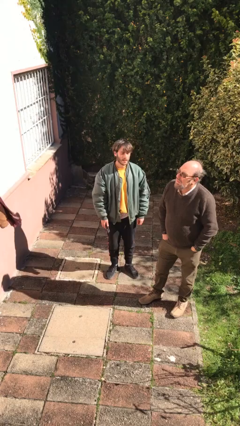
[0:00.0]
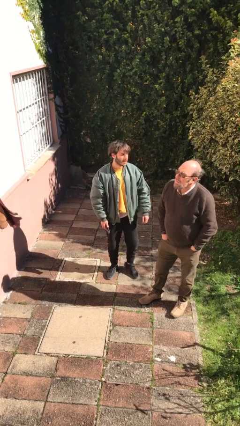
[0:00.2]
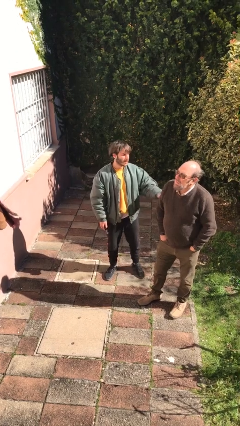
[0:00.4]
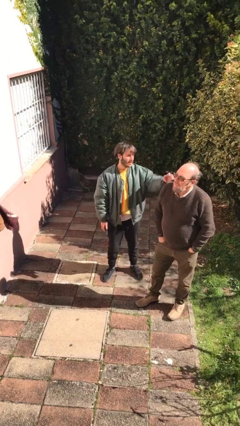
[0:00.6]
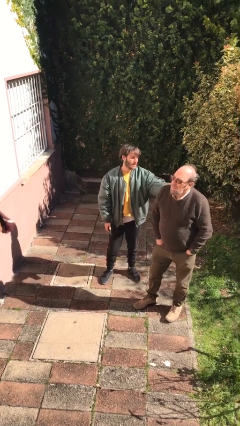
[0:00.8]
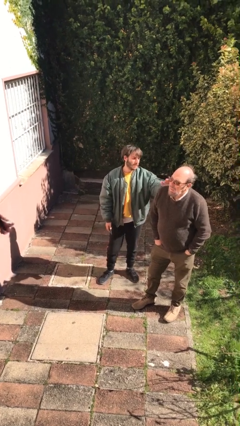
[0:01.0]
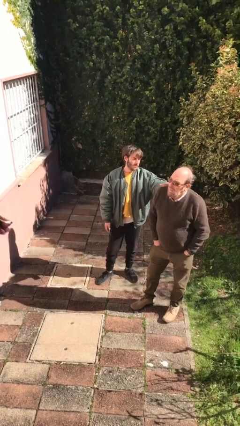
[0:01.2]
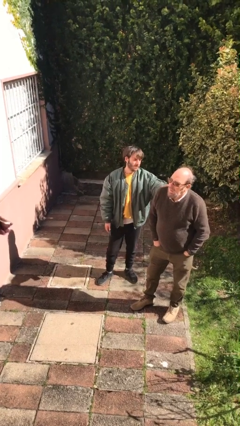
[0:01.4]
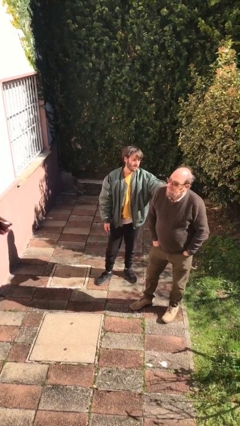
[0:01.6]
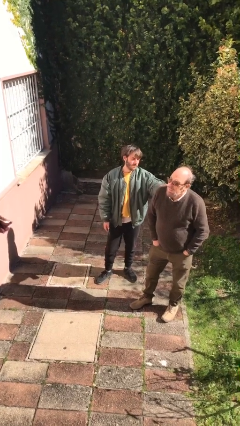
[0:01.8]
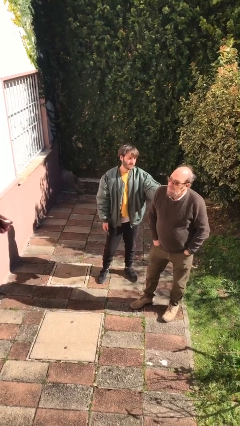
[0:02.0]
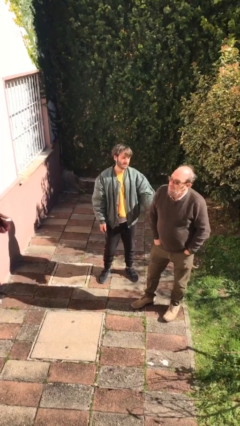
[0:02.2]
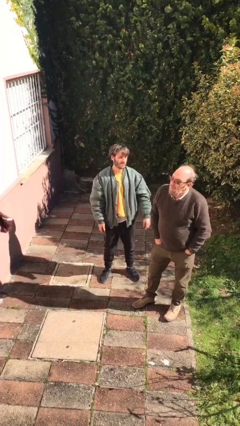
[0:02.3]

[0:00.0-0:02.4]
person touches back of person

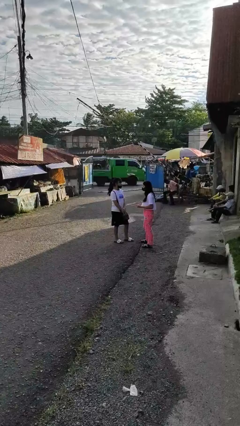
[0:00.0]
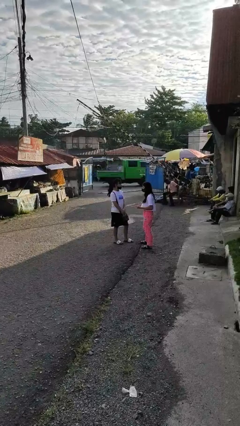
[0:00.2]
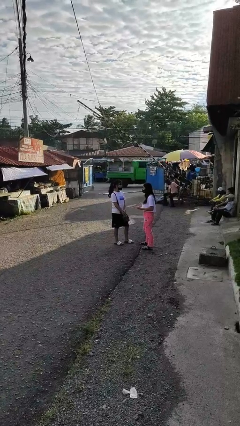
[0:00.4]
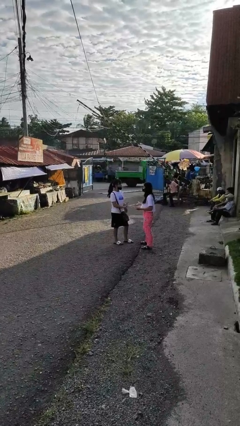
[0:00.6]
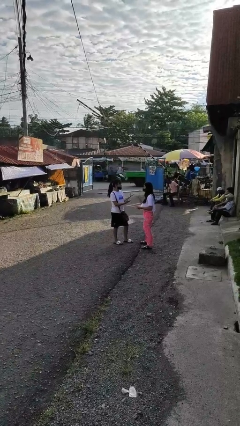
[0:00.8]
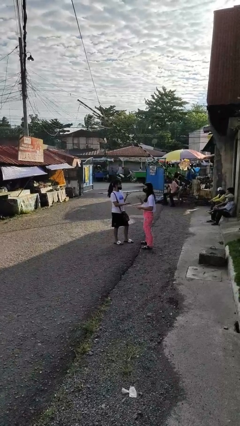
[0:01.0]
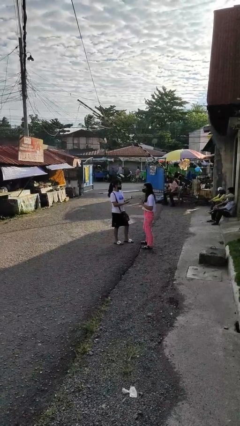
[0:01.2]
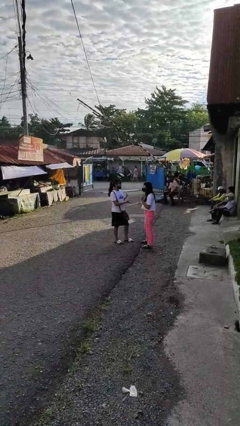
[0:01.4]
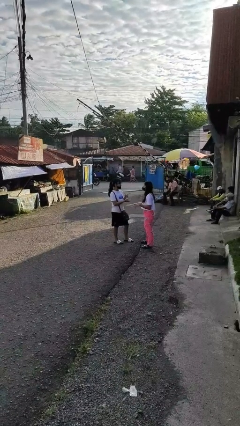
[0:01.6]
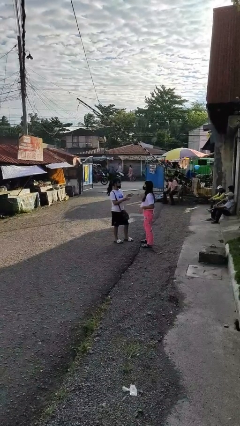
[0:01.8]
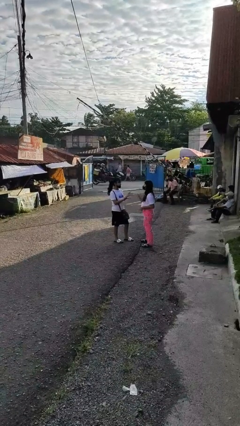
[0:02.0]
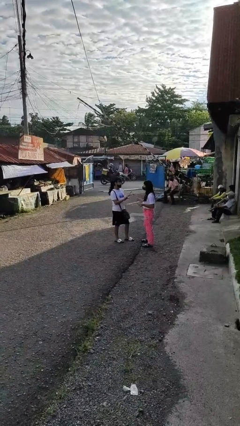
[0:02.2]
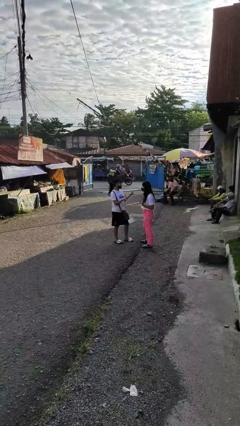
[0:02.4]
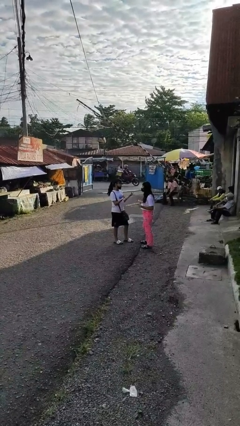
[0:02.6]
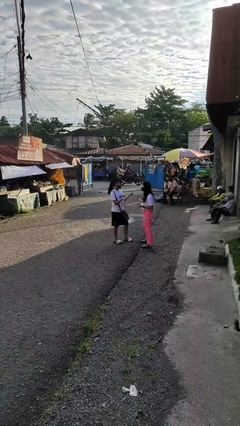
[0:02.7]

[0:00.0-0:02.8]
person talks to person

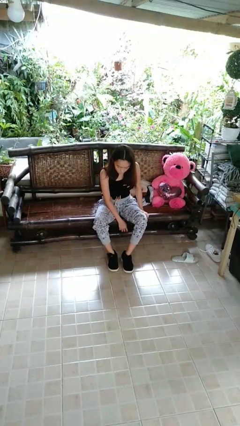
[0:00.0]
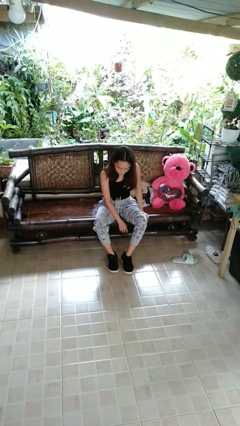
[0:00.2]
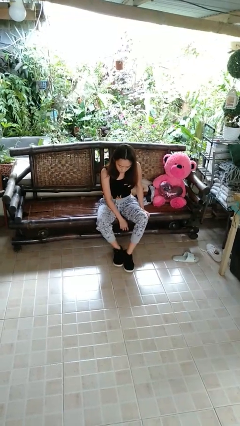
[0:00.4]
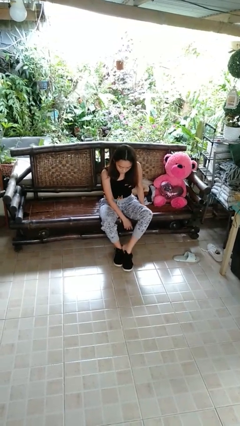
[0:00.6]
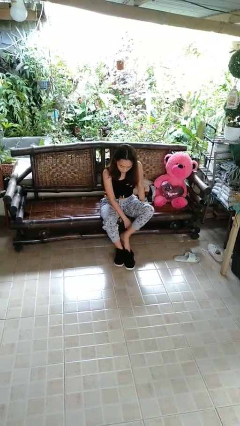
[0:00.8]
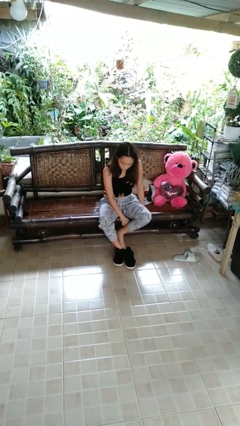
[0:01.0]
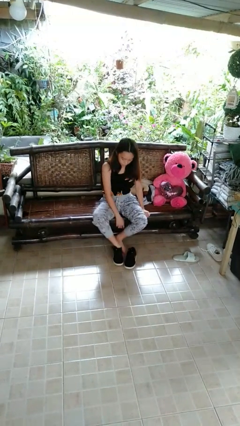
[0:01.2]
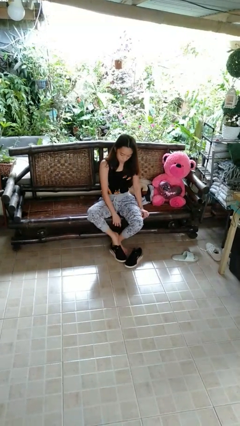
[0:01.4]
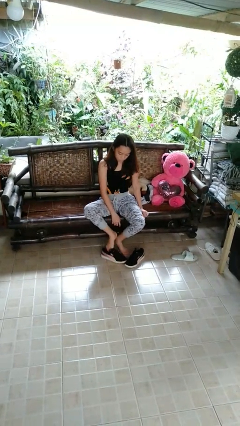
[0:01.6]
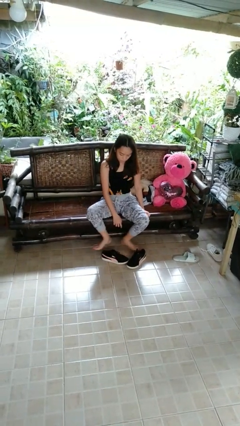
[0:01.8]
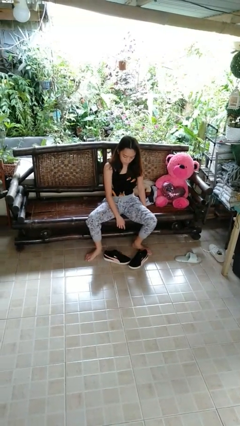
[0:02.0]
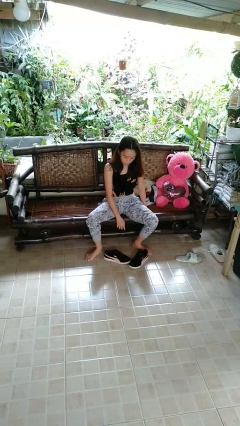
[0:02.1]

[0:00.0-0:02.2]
person takes off shoes

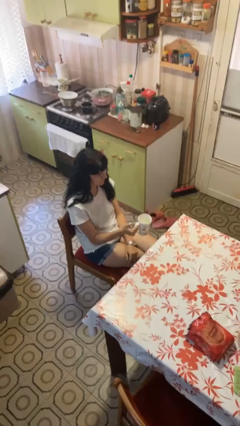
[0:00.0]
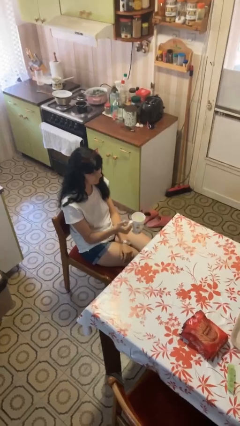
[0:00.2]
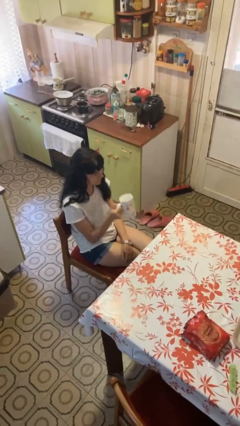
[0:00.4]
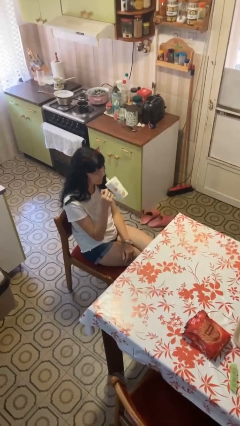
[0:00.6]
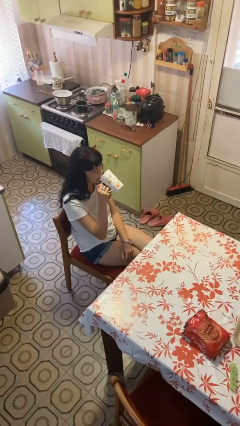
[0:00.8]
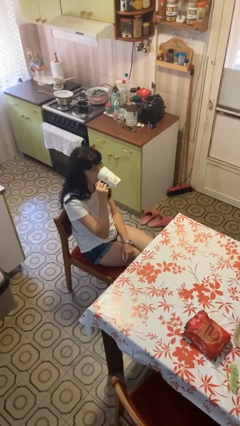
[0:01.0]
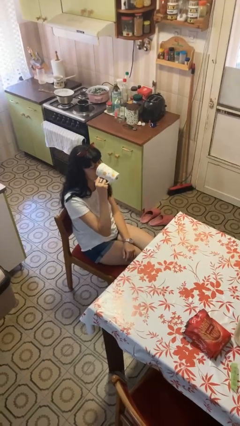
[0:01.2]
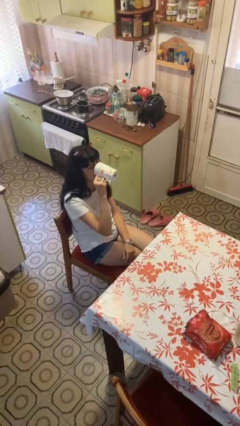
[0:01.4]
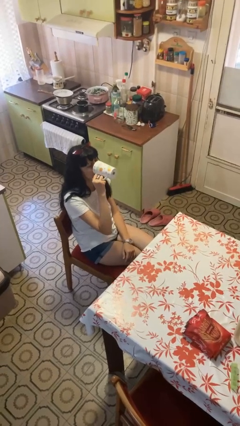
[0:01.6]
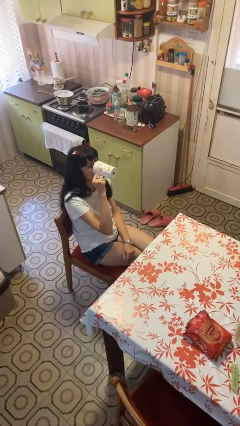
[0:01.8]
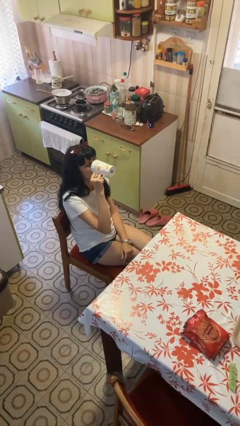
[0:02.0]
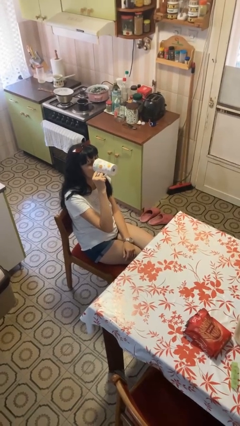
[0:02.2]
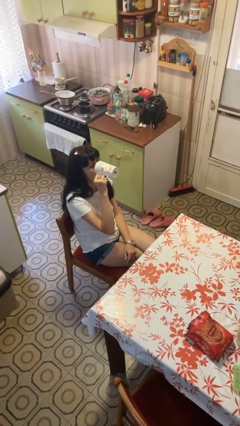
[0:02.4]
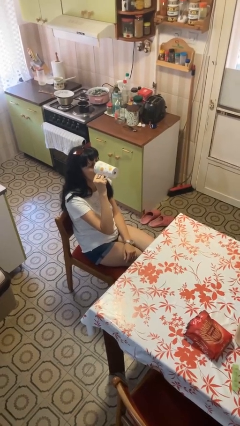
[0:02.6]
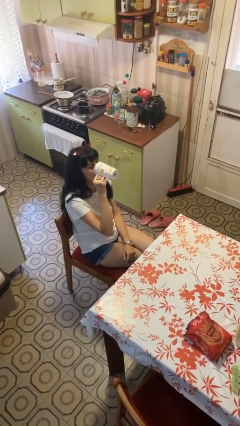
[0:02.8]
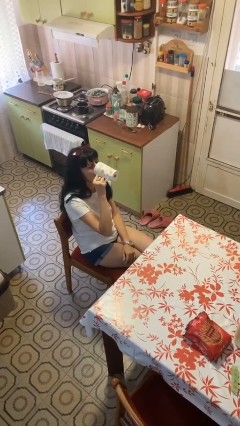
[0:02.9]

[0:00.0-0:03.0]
person drinks from mug

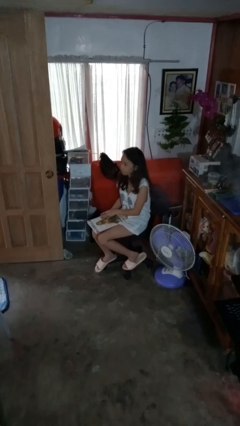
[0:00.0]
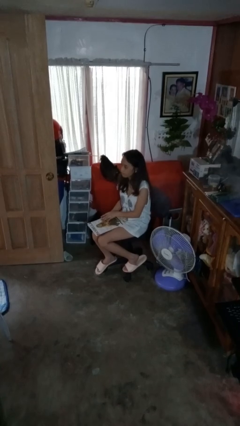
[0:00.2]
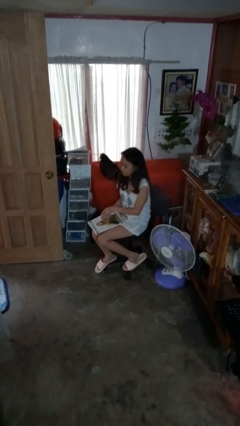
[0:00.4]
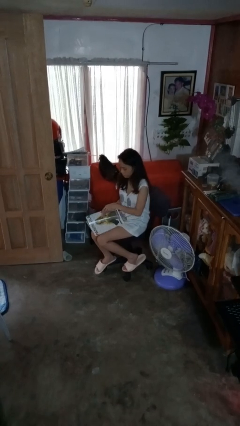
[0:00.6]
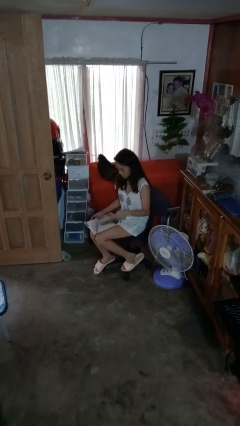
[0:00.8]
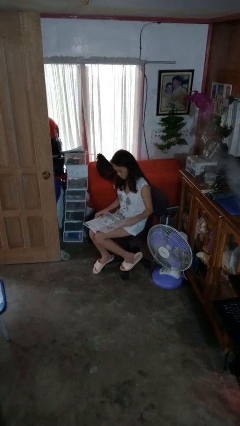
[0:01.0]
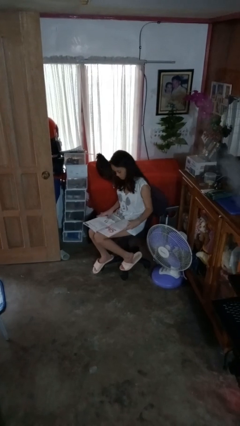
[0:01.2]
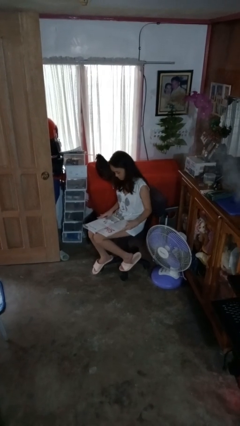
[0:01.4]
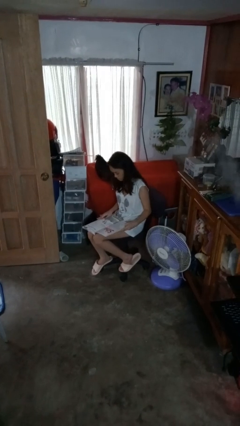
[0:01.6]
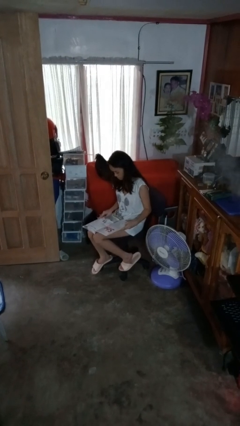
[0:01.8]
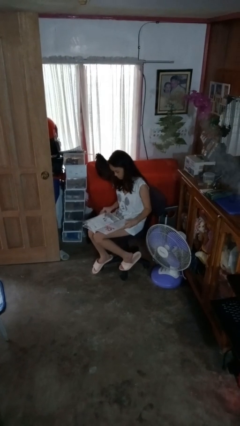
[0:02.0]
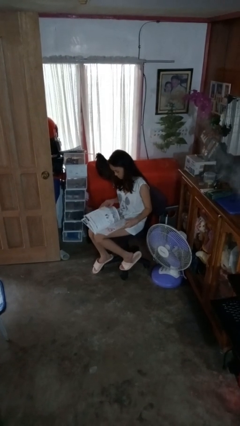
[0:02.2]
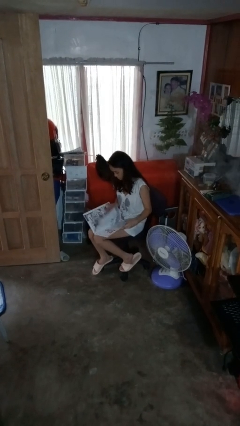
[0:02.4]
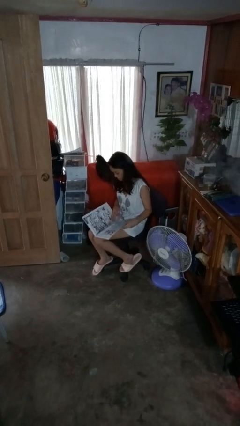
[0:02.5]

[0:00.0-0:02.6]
person reads magazine

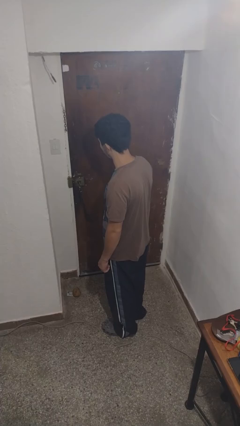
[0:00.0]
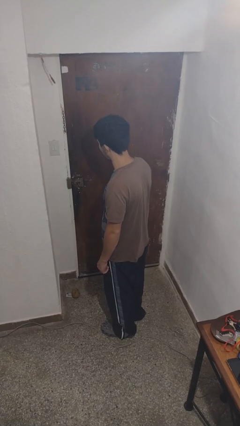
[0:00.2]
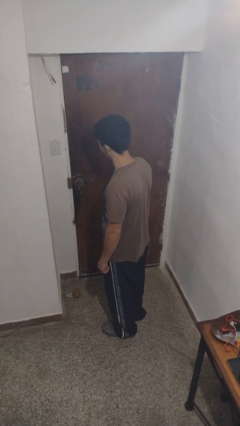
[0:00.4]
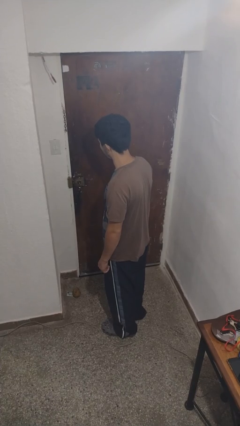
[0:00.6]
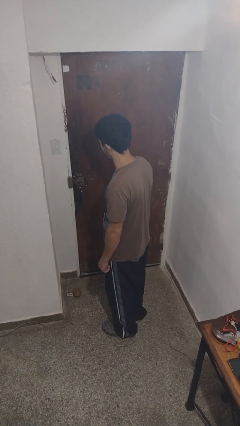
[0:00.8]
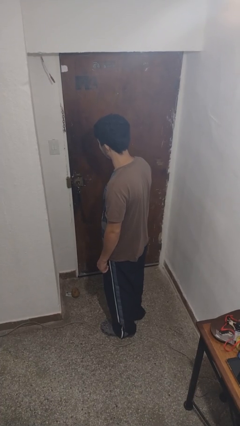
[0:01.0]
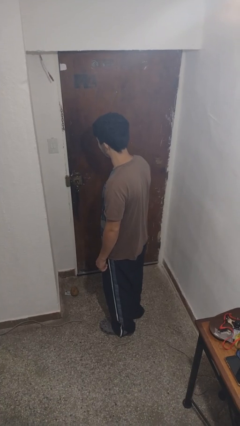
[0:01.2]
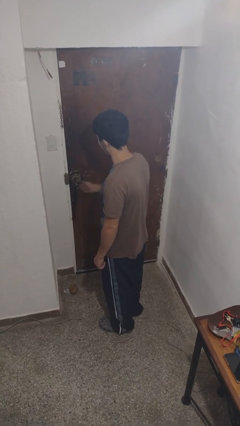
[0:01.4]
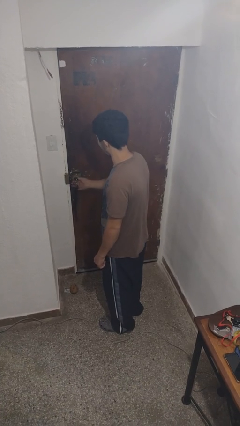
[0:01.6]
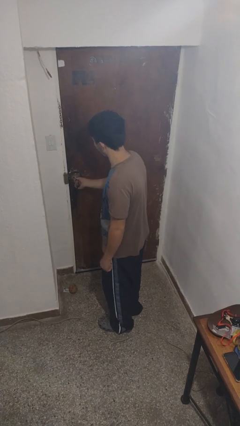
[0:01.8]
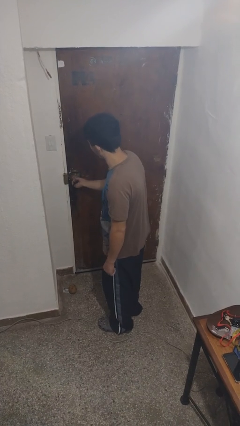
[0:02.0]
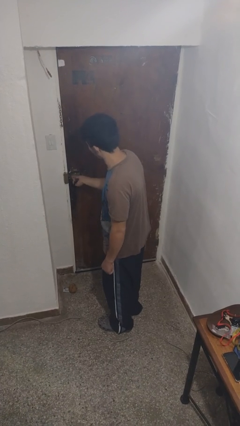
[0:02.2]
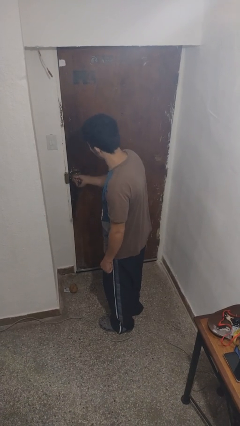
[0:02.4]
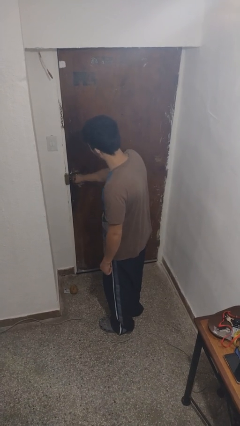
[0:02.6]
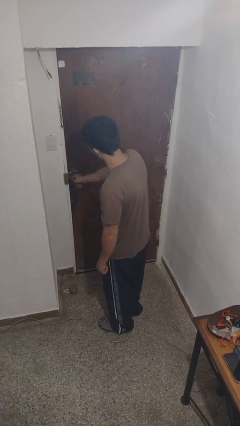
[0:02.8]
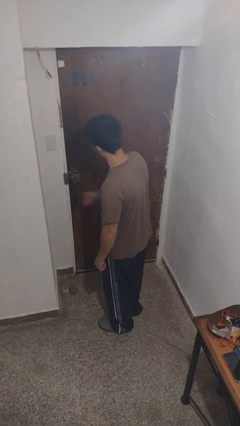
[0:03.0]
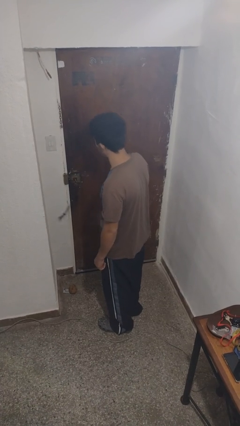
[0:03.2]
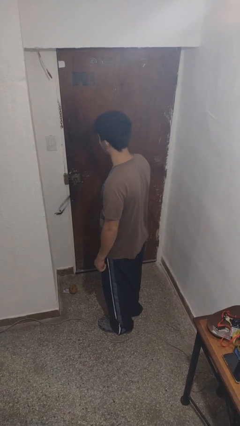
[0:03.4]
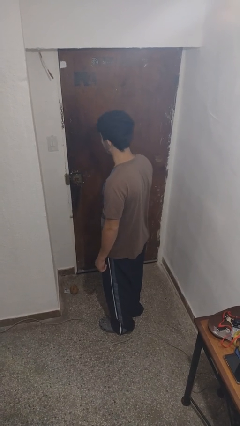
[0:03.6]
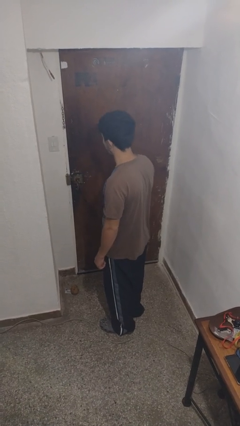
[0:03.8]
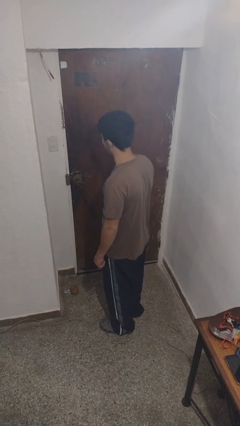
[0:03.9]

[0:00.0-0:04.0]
person unlocks door with keys

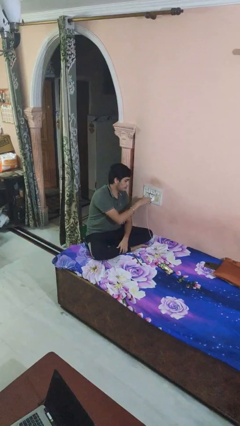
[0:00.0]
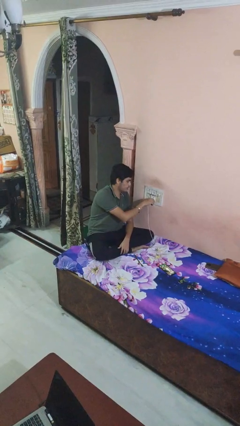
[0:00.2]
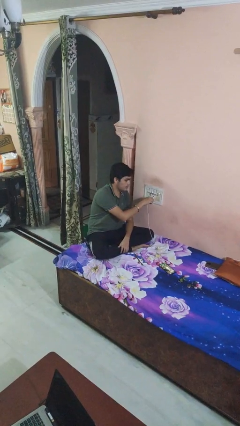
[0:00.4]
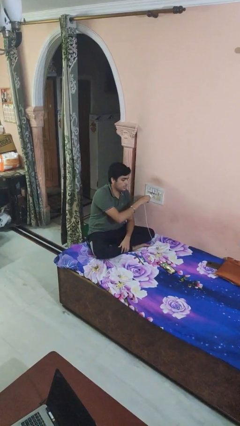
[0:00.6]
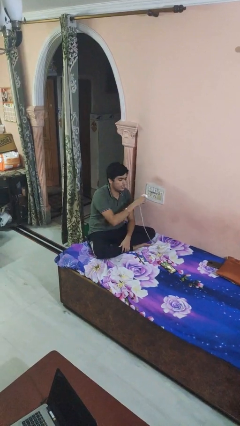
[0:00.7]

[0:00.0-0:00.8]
person unplugs from electrical socket
